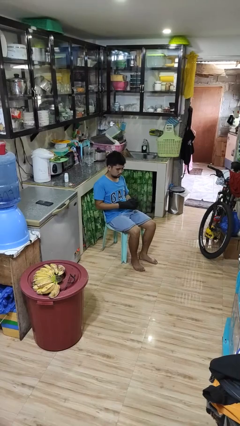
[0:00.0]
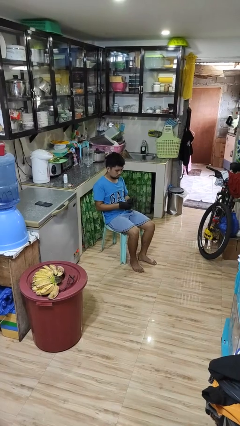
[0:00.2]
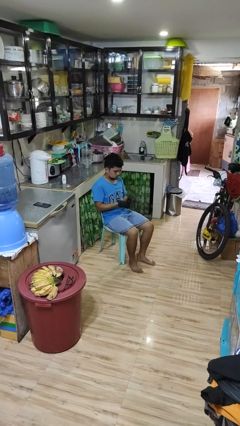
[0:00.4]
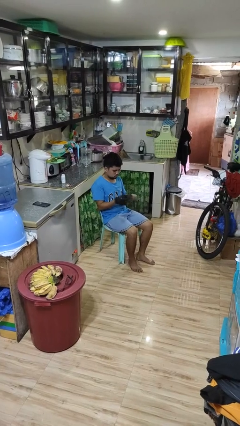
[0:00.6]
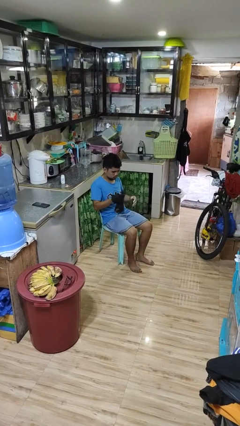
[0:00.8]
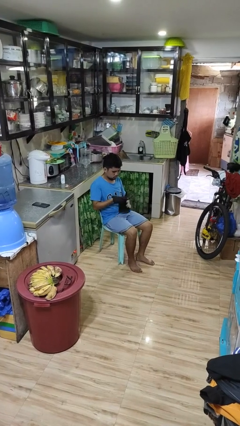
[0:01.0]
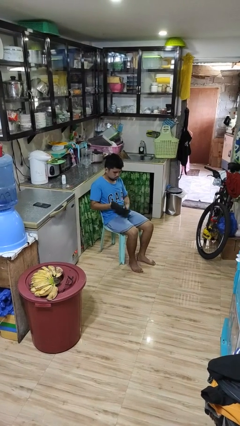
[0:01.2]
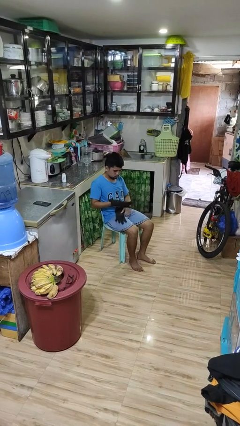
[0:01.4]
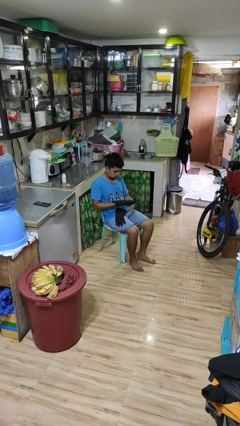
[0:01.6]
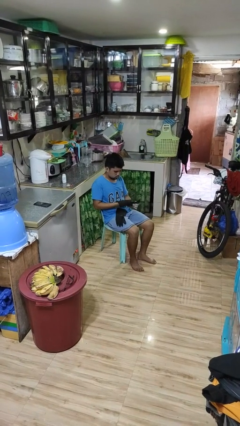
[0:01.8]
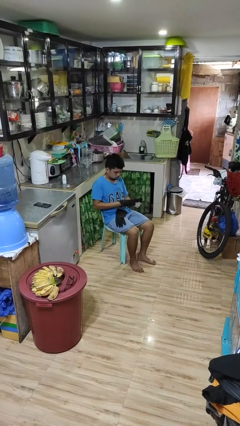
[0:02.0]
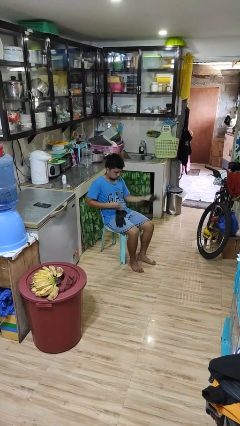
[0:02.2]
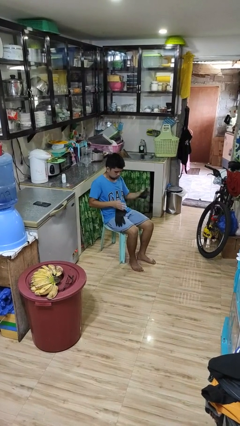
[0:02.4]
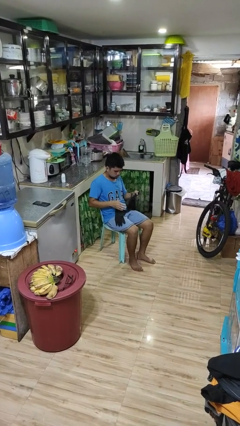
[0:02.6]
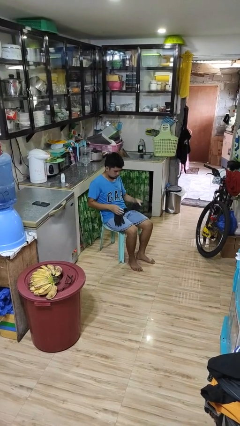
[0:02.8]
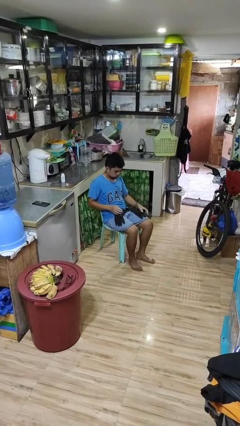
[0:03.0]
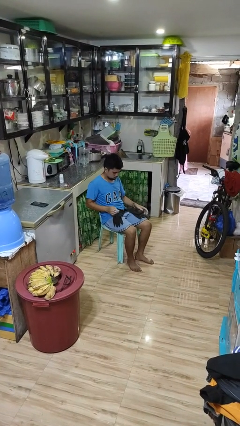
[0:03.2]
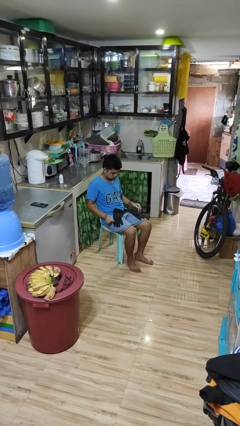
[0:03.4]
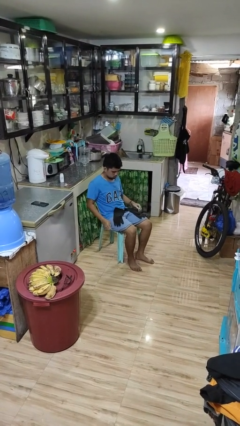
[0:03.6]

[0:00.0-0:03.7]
person takes off gloves

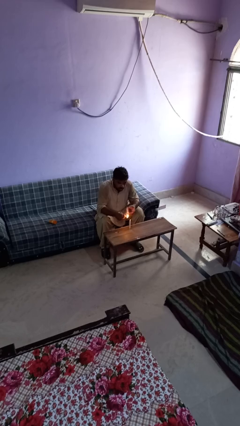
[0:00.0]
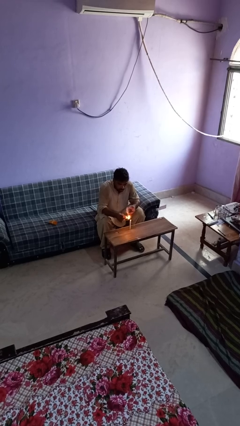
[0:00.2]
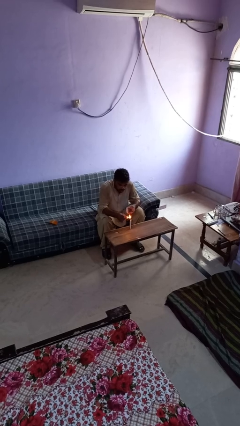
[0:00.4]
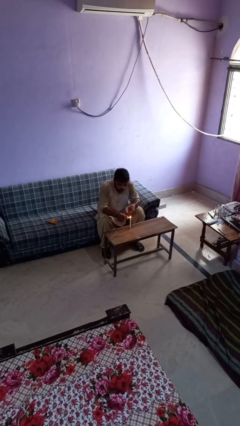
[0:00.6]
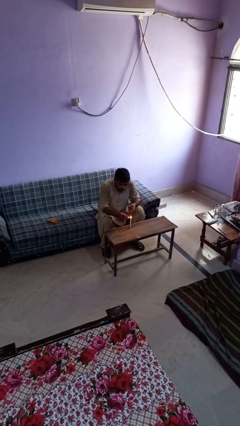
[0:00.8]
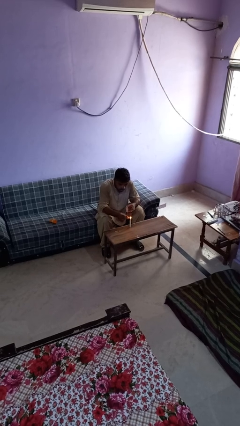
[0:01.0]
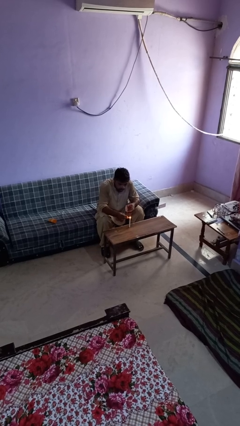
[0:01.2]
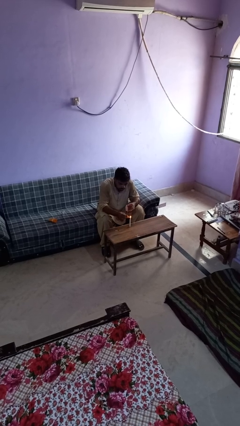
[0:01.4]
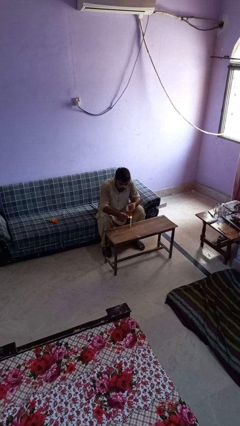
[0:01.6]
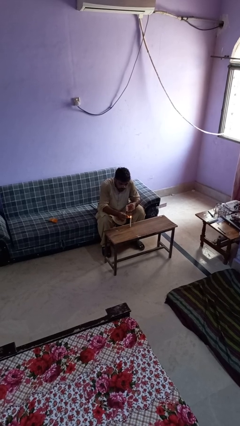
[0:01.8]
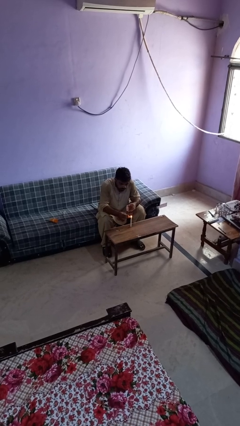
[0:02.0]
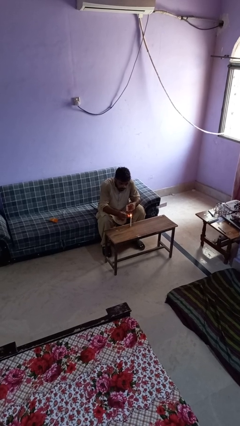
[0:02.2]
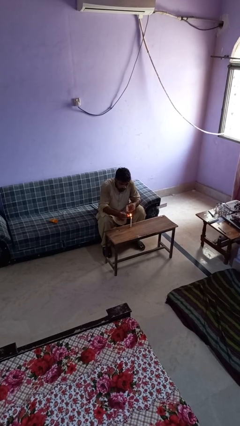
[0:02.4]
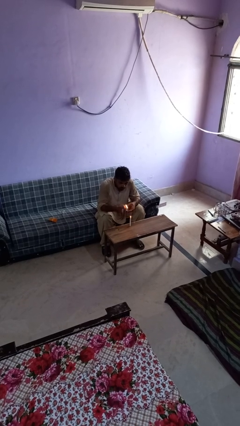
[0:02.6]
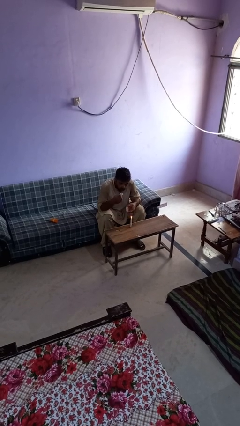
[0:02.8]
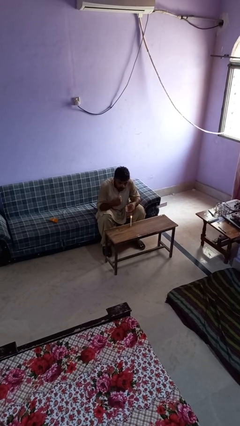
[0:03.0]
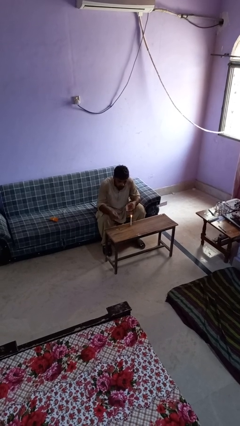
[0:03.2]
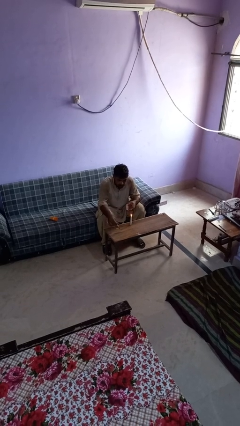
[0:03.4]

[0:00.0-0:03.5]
person lights candle

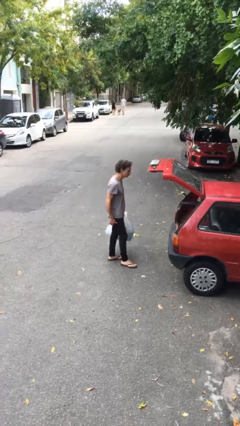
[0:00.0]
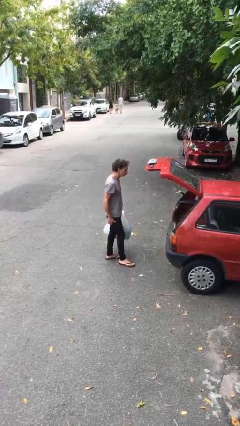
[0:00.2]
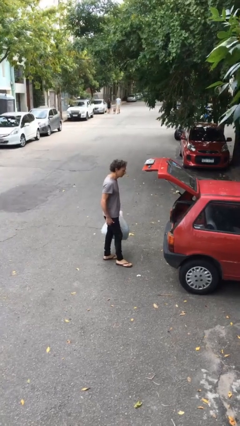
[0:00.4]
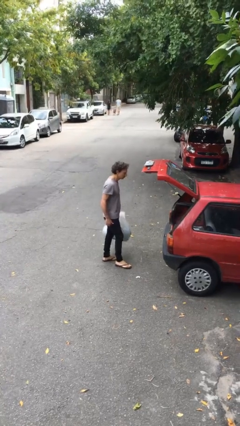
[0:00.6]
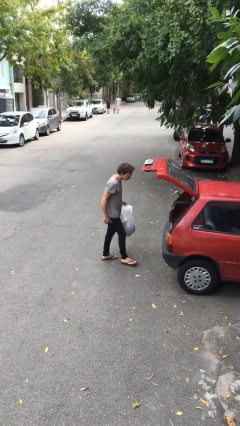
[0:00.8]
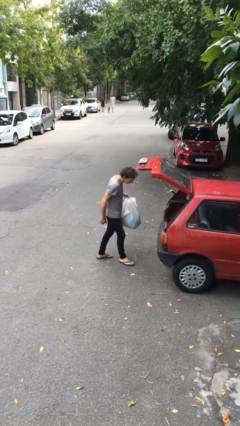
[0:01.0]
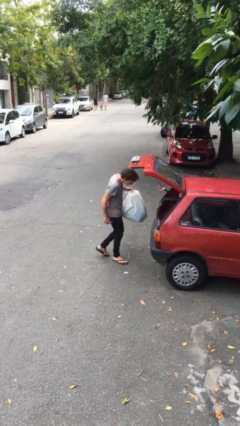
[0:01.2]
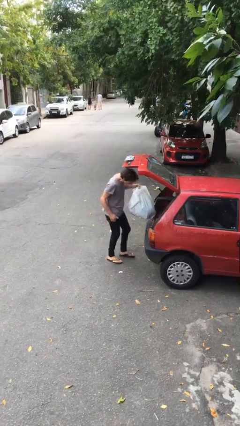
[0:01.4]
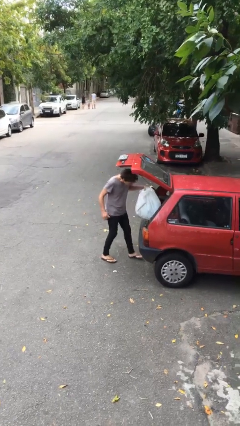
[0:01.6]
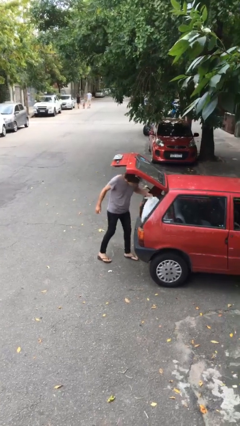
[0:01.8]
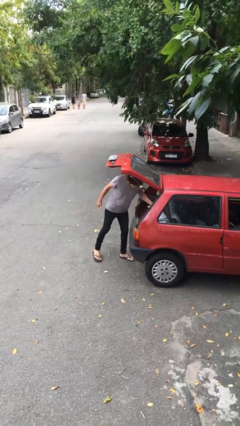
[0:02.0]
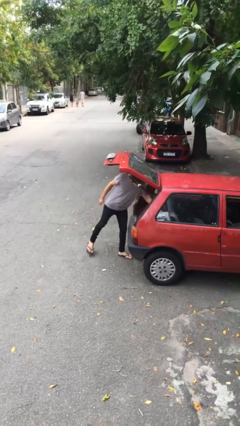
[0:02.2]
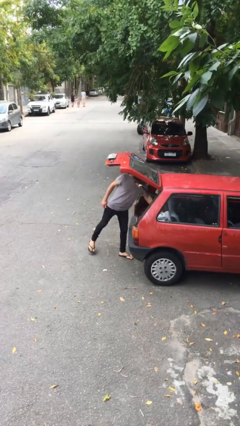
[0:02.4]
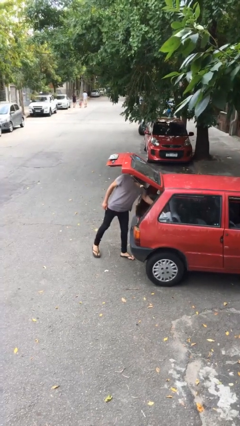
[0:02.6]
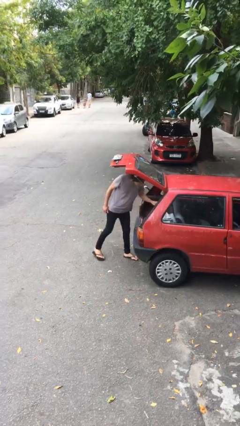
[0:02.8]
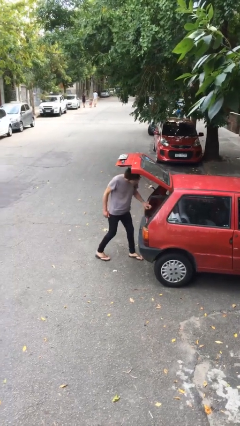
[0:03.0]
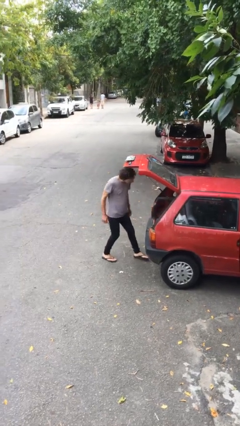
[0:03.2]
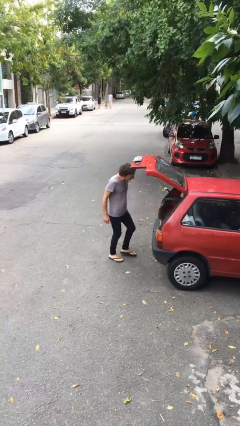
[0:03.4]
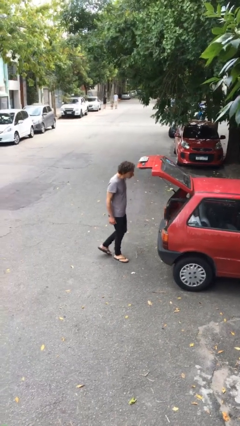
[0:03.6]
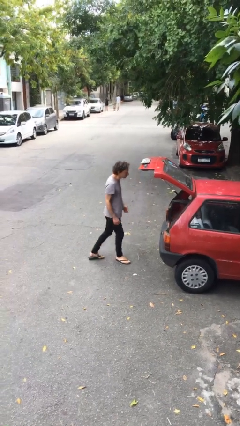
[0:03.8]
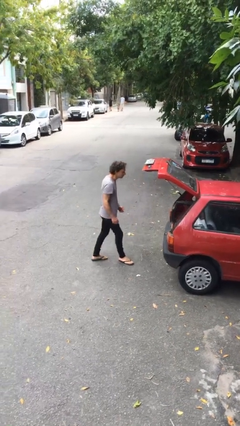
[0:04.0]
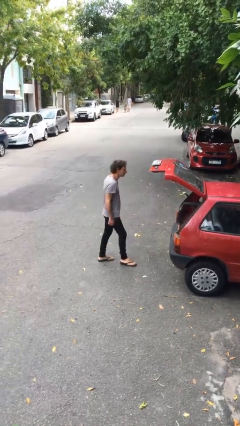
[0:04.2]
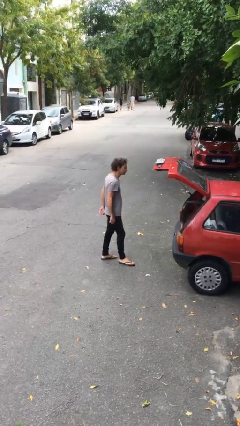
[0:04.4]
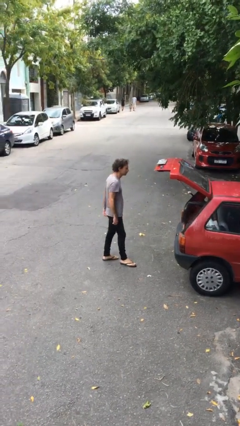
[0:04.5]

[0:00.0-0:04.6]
person loads car

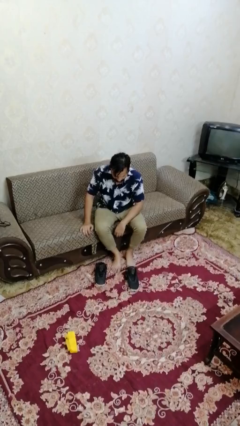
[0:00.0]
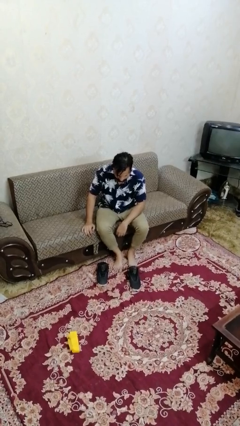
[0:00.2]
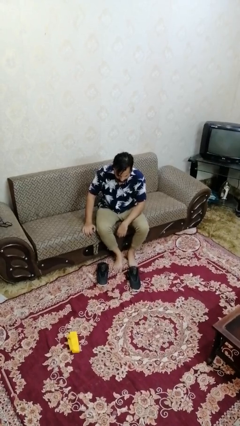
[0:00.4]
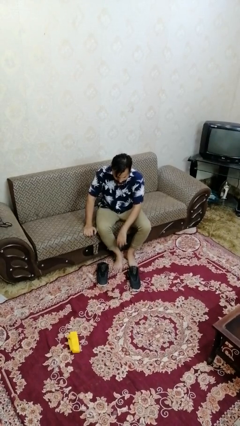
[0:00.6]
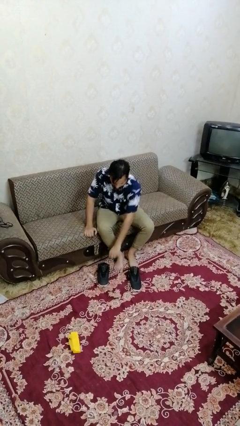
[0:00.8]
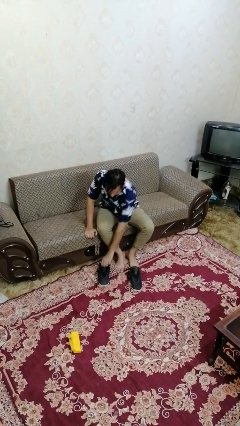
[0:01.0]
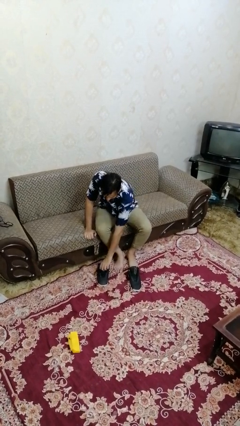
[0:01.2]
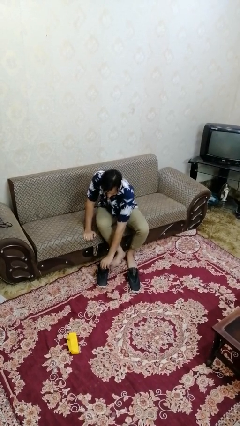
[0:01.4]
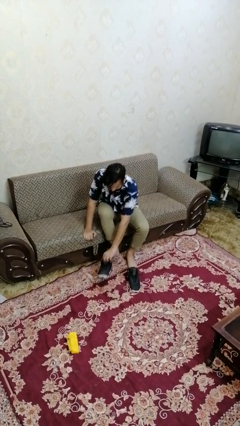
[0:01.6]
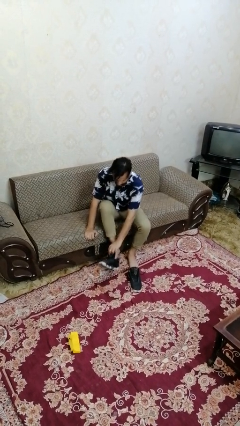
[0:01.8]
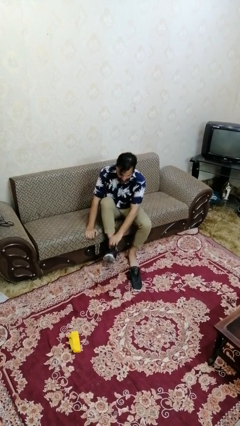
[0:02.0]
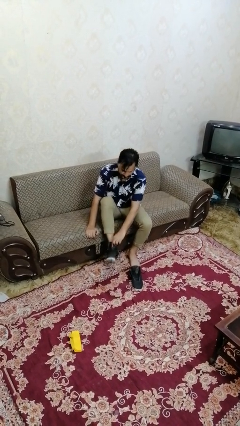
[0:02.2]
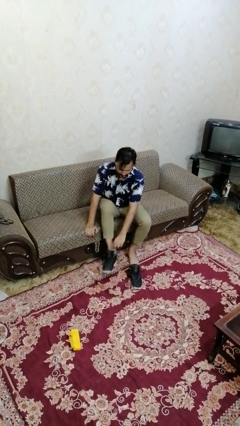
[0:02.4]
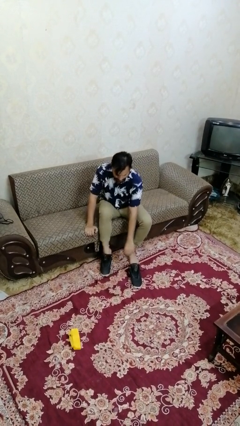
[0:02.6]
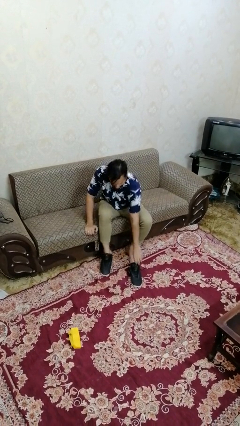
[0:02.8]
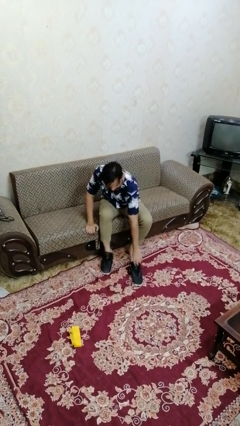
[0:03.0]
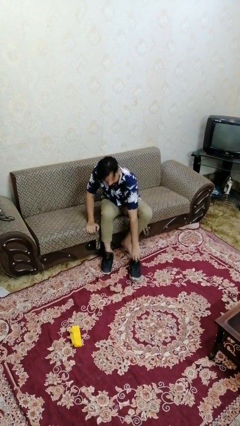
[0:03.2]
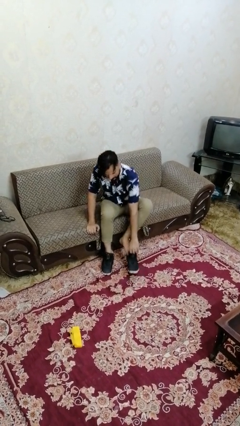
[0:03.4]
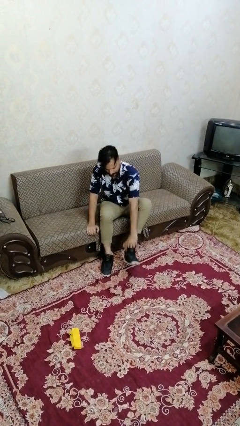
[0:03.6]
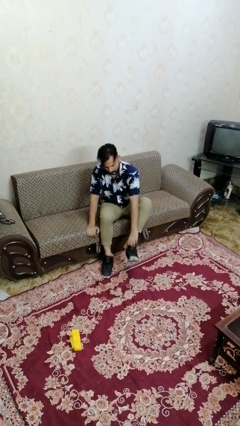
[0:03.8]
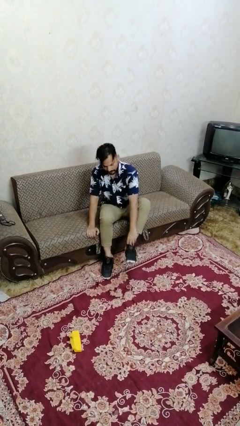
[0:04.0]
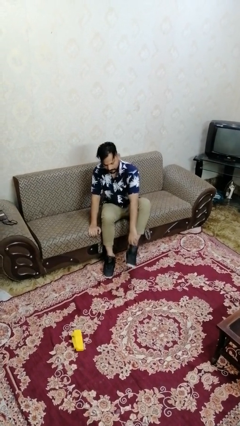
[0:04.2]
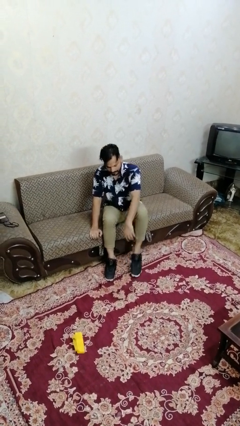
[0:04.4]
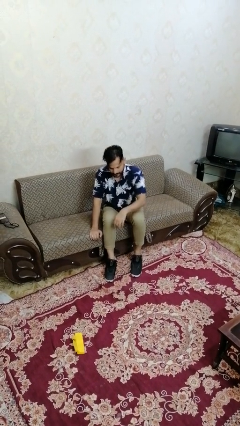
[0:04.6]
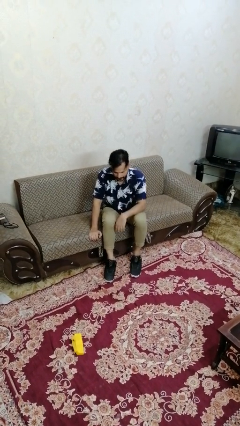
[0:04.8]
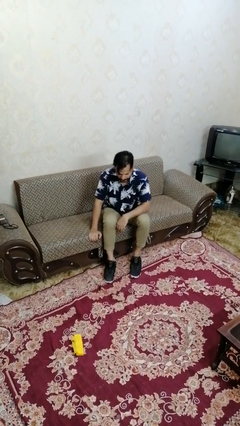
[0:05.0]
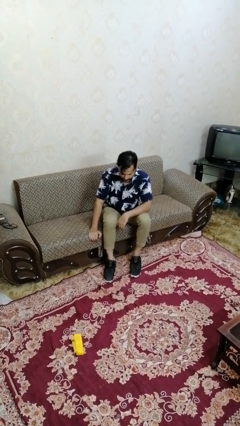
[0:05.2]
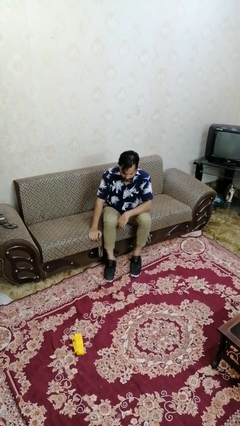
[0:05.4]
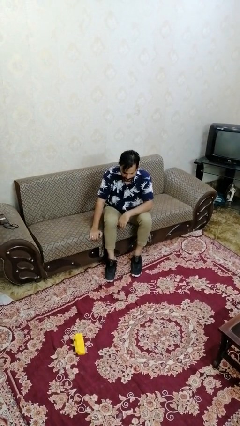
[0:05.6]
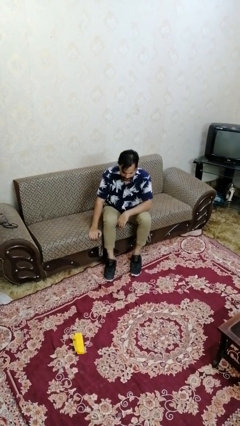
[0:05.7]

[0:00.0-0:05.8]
person puts on shoes

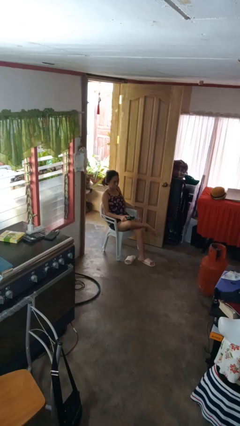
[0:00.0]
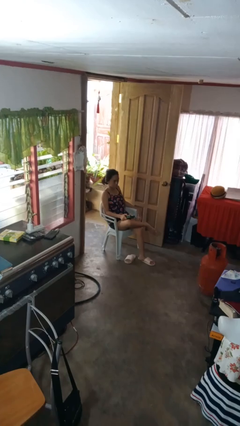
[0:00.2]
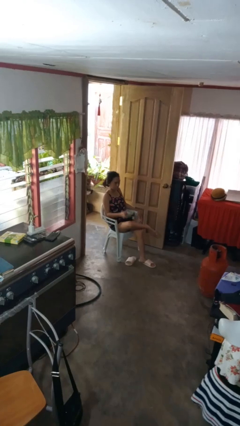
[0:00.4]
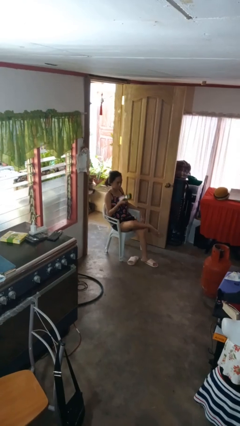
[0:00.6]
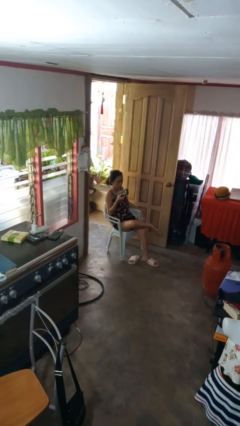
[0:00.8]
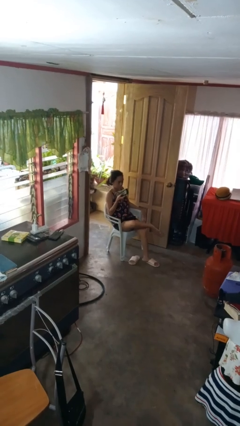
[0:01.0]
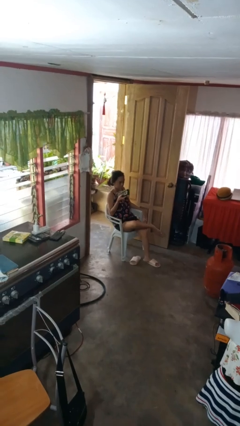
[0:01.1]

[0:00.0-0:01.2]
person uses television remote
